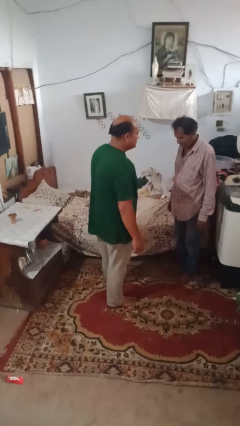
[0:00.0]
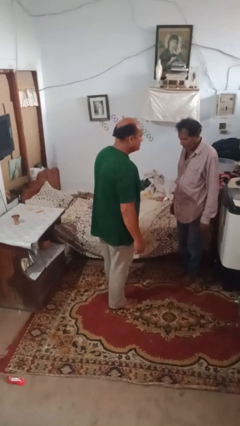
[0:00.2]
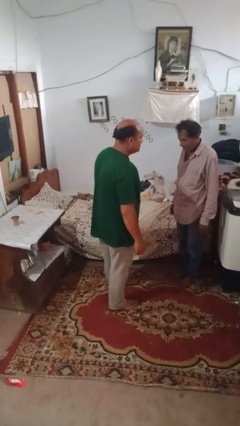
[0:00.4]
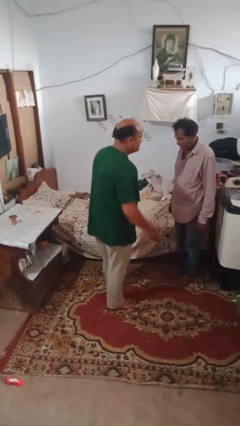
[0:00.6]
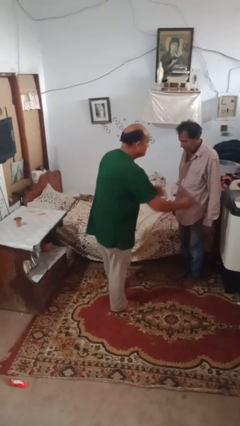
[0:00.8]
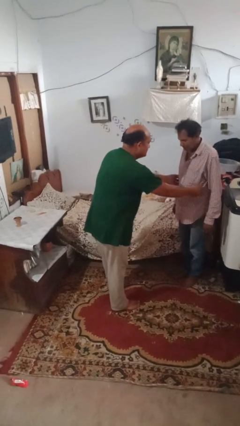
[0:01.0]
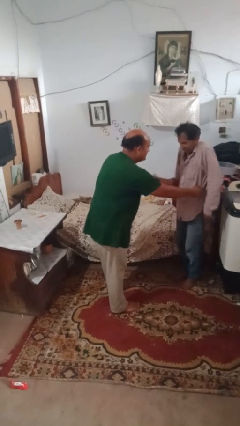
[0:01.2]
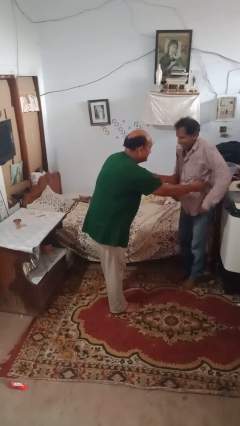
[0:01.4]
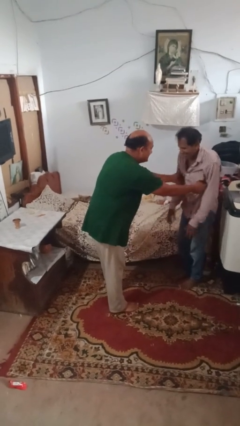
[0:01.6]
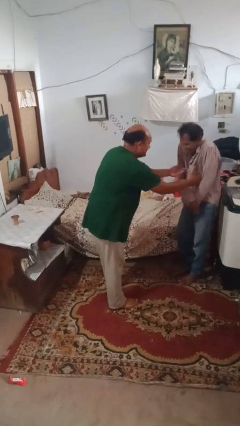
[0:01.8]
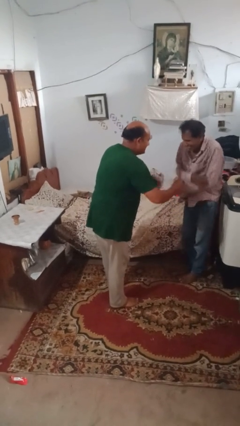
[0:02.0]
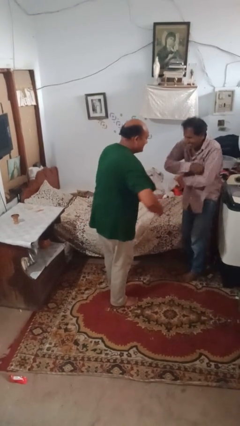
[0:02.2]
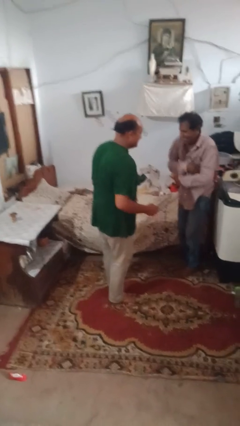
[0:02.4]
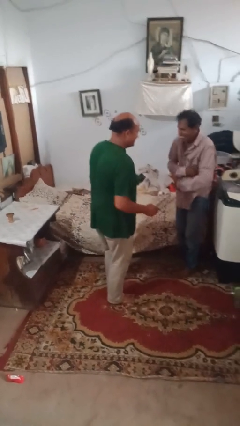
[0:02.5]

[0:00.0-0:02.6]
person tickles person

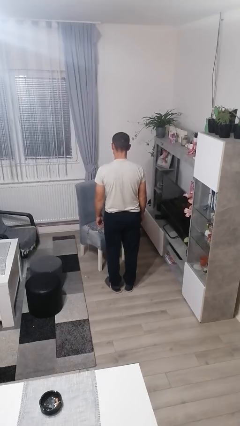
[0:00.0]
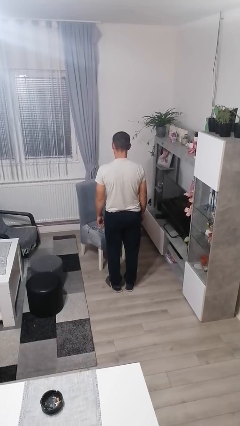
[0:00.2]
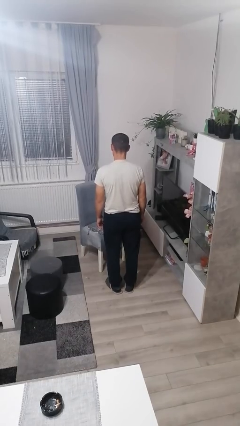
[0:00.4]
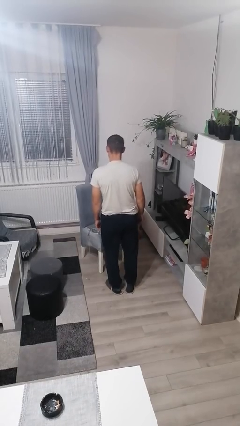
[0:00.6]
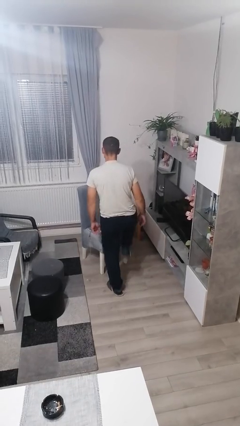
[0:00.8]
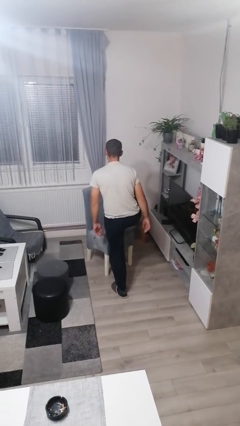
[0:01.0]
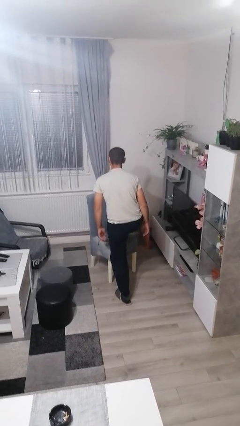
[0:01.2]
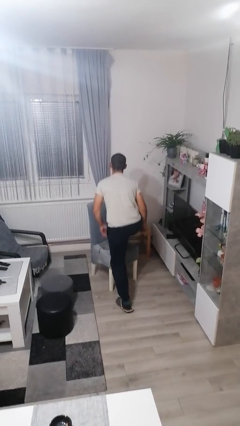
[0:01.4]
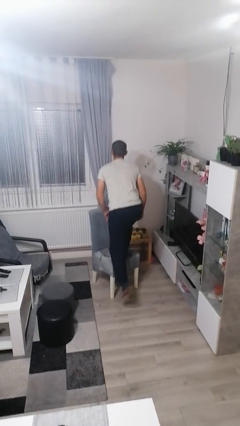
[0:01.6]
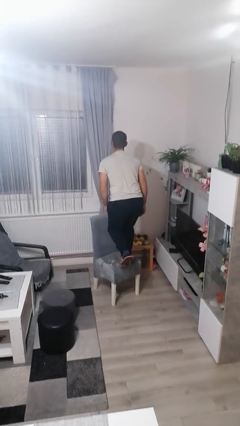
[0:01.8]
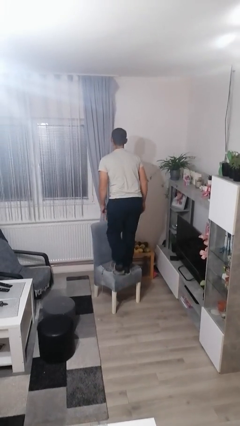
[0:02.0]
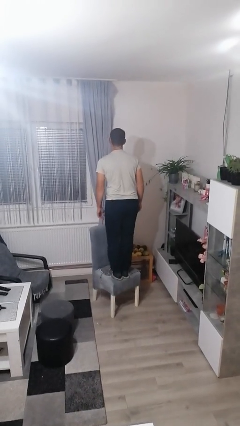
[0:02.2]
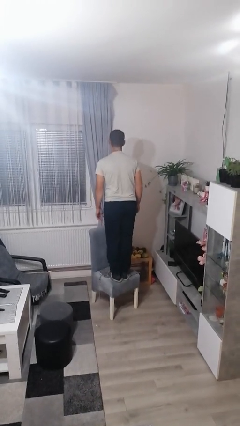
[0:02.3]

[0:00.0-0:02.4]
person climbs on chair

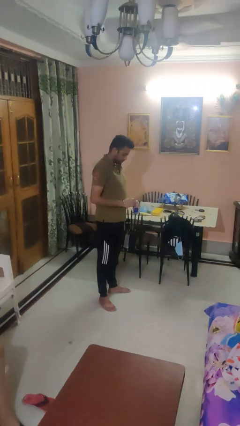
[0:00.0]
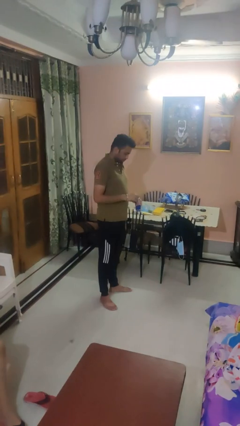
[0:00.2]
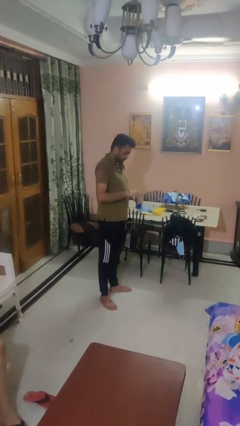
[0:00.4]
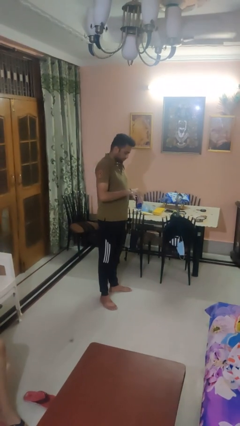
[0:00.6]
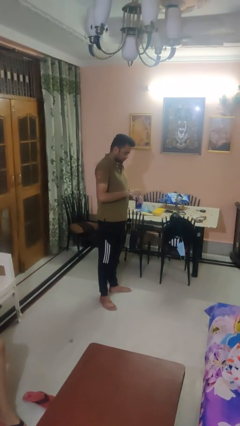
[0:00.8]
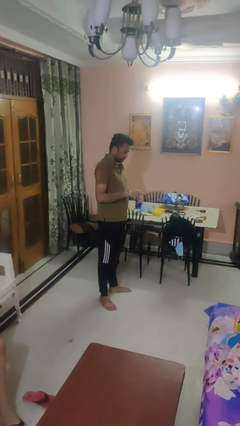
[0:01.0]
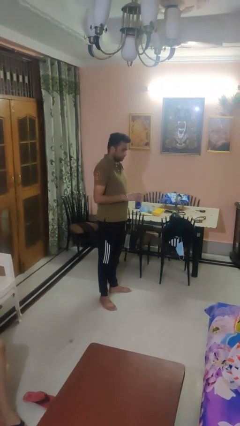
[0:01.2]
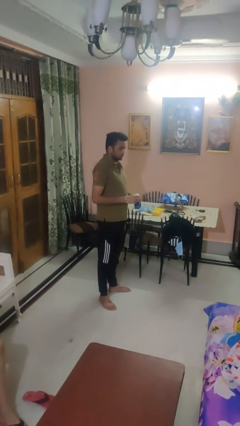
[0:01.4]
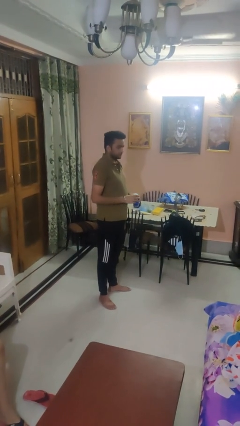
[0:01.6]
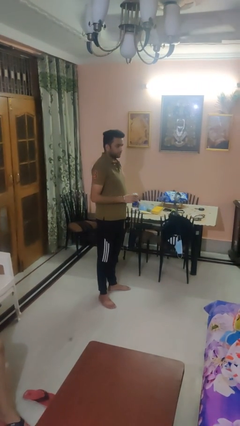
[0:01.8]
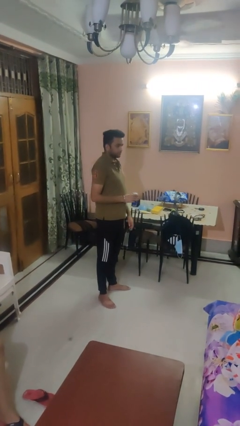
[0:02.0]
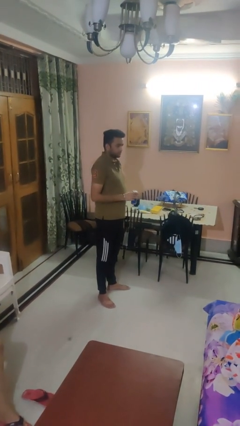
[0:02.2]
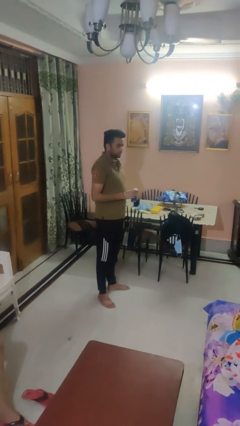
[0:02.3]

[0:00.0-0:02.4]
person opens beverage can

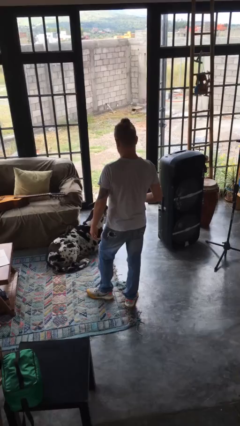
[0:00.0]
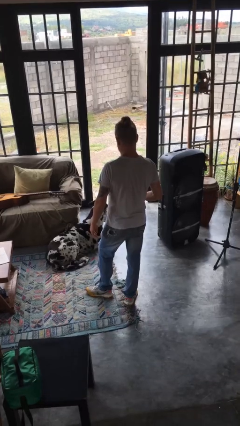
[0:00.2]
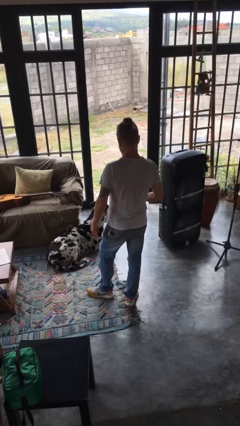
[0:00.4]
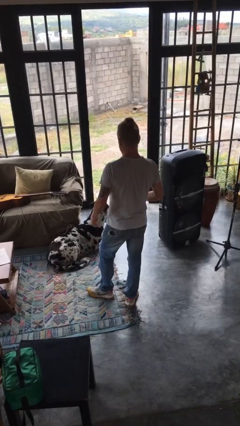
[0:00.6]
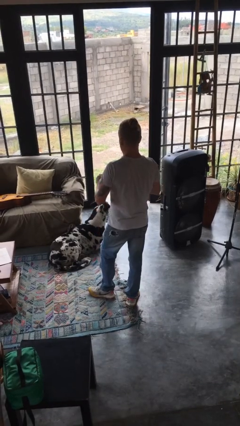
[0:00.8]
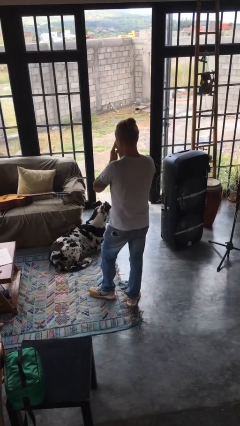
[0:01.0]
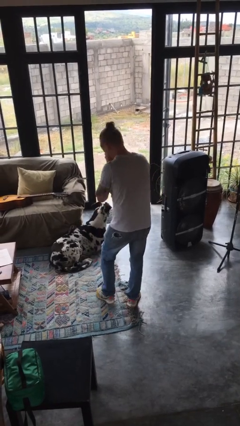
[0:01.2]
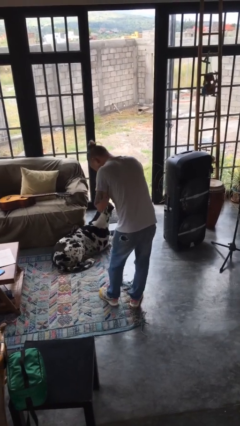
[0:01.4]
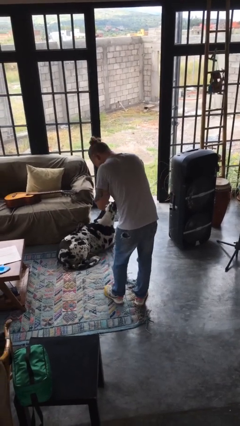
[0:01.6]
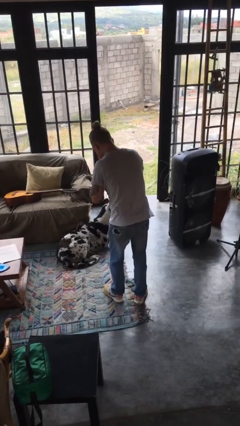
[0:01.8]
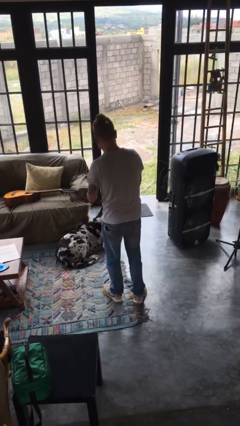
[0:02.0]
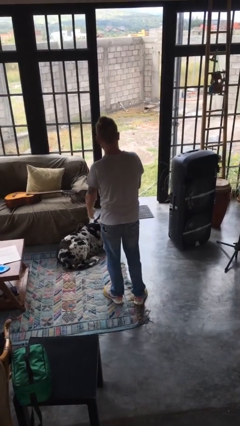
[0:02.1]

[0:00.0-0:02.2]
person sneezes into hand

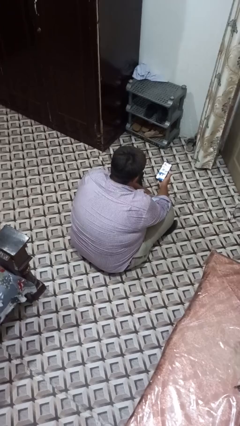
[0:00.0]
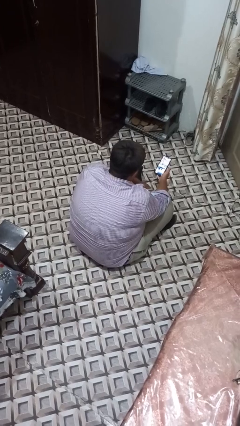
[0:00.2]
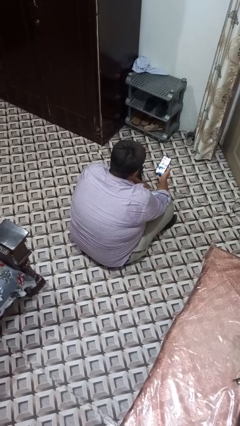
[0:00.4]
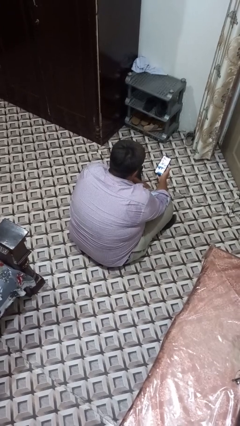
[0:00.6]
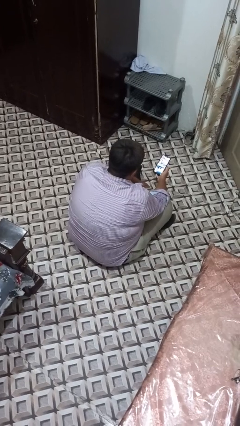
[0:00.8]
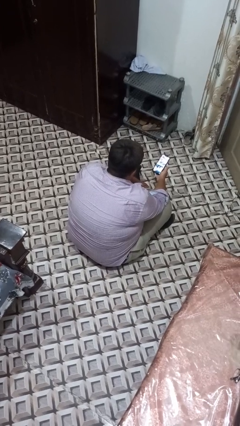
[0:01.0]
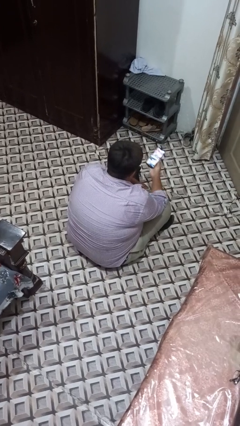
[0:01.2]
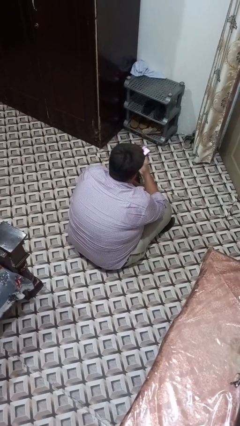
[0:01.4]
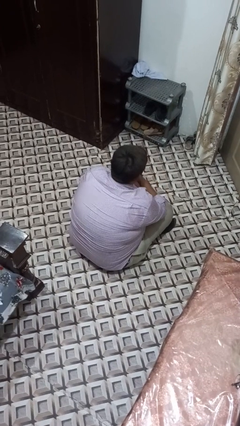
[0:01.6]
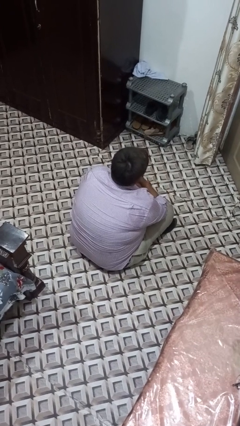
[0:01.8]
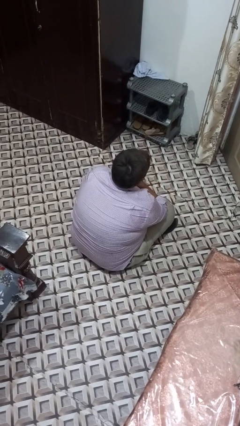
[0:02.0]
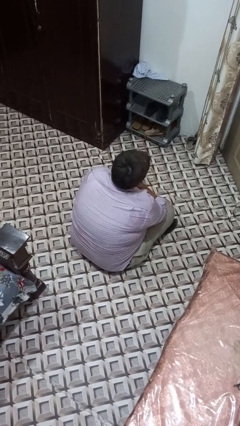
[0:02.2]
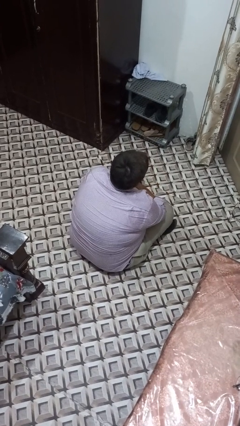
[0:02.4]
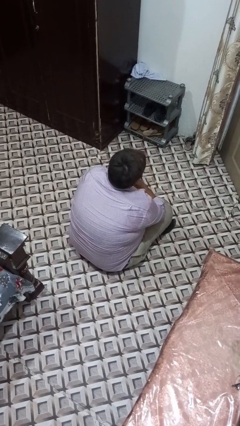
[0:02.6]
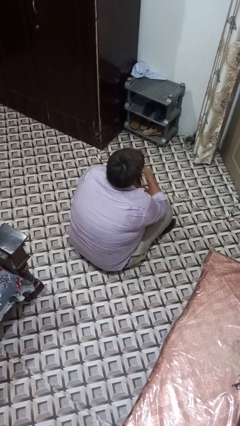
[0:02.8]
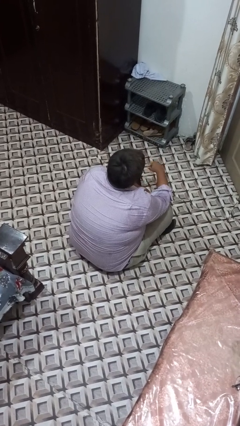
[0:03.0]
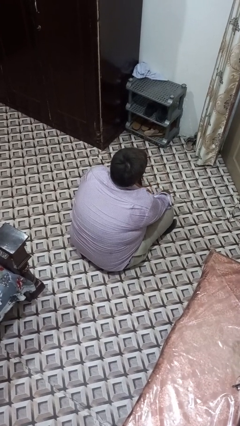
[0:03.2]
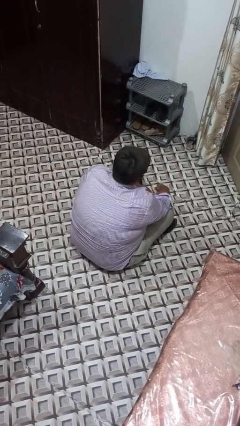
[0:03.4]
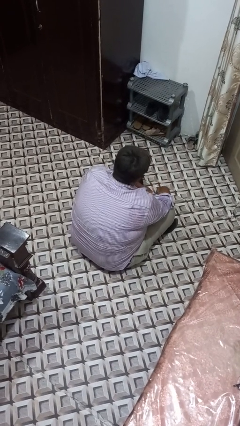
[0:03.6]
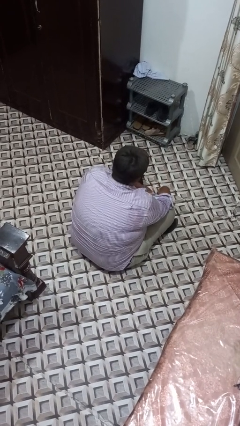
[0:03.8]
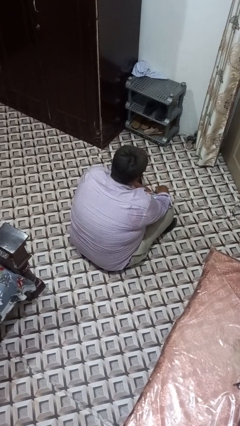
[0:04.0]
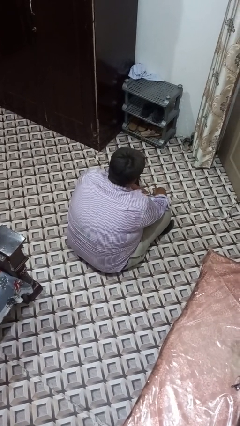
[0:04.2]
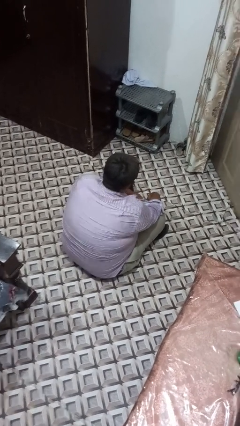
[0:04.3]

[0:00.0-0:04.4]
person puts phone into pocket

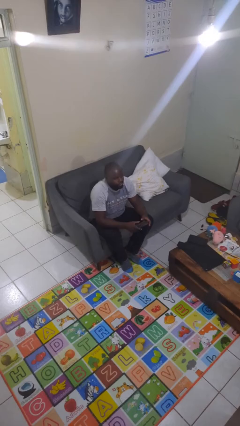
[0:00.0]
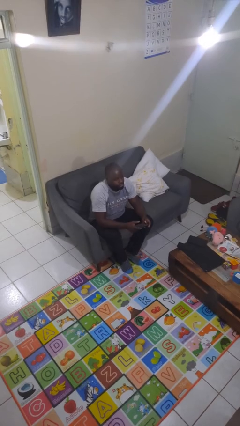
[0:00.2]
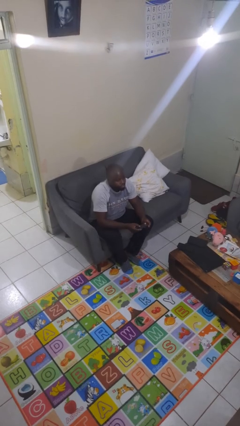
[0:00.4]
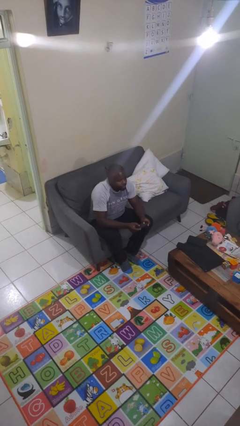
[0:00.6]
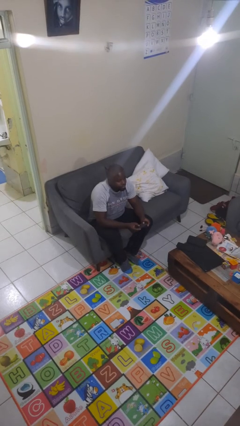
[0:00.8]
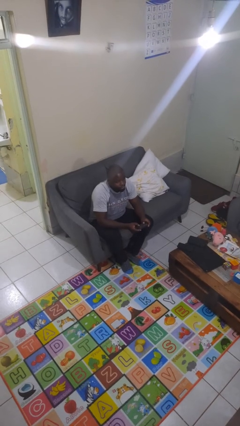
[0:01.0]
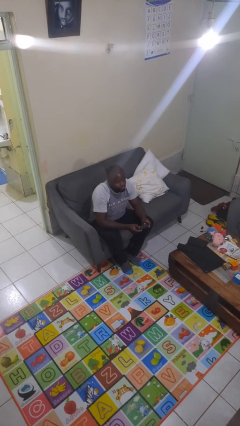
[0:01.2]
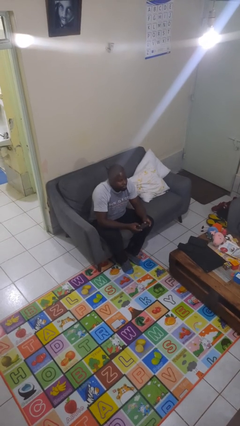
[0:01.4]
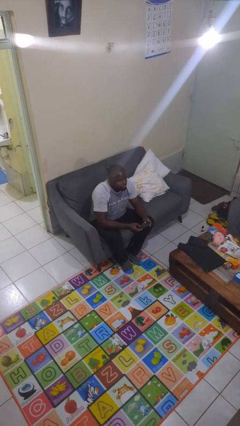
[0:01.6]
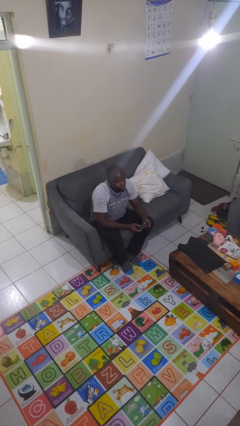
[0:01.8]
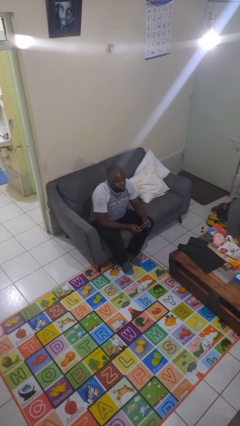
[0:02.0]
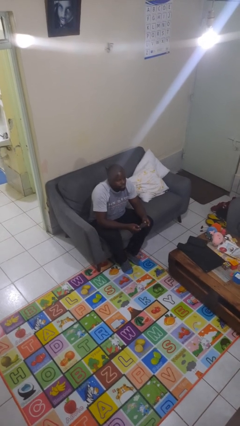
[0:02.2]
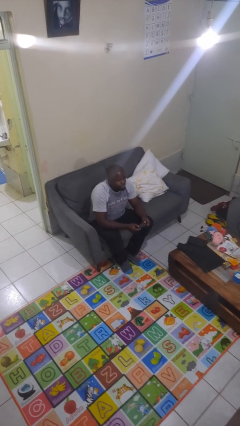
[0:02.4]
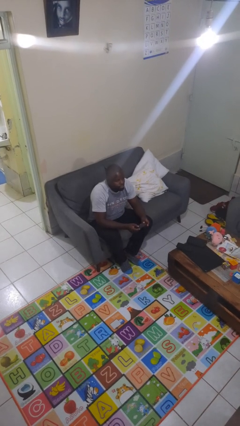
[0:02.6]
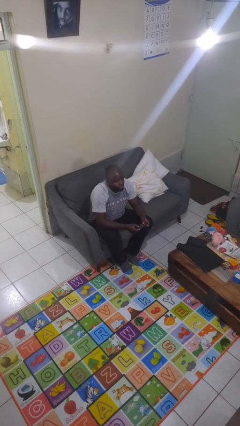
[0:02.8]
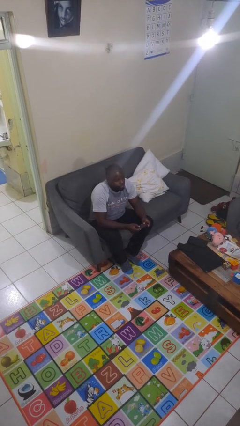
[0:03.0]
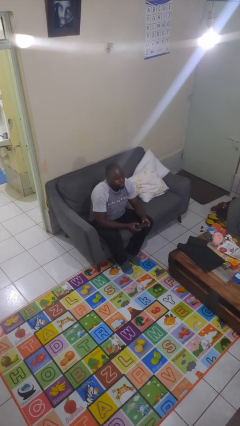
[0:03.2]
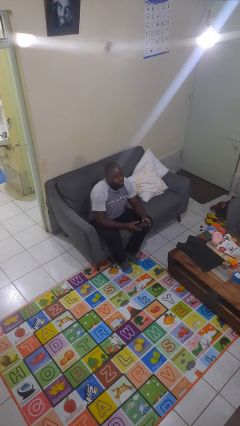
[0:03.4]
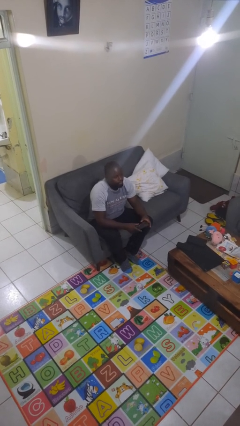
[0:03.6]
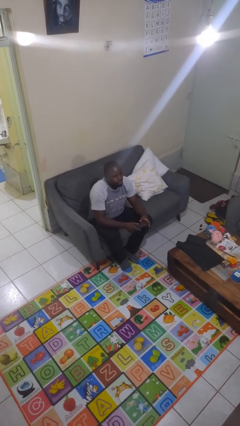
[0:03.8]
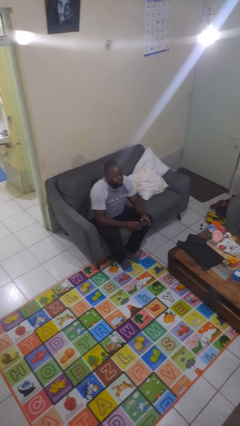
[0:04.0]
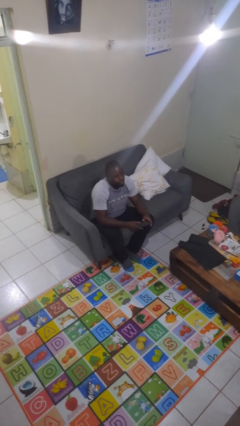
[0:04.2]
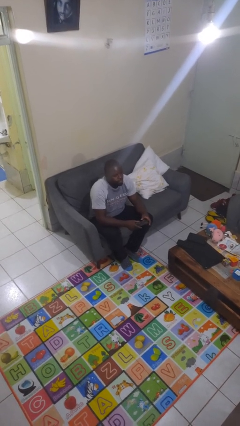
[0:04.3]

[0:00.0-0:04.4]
person interacts with handheld game
